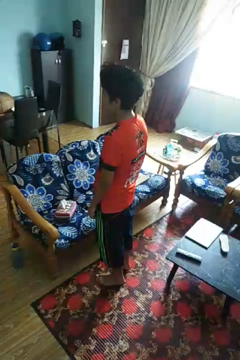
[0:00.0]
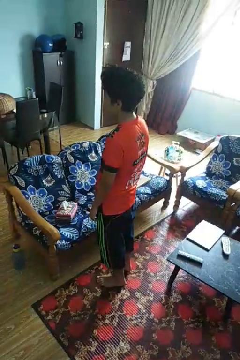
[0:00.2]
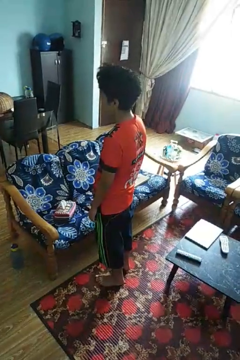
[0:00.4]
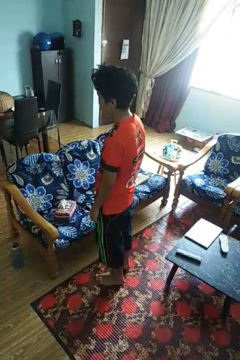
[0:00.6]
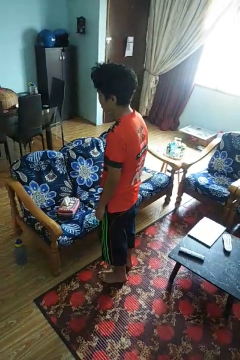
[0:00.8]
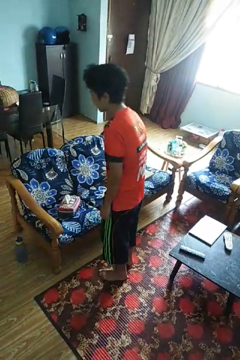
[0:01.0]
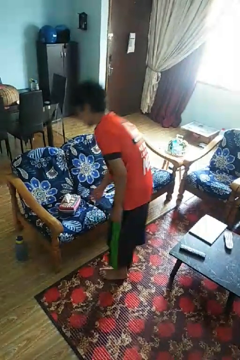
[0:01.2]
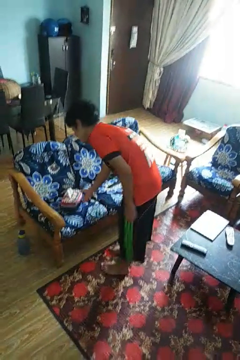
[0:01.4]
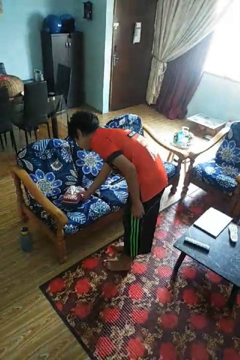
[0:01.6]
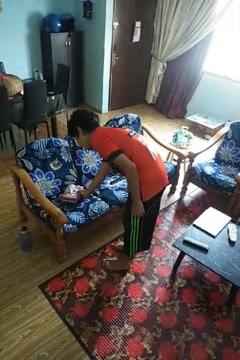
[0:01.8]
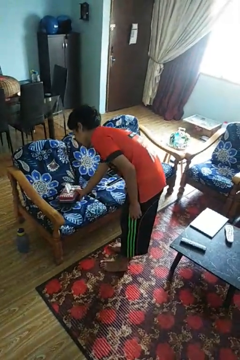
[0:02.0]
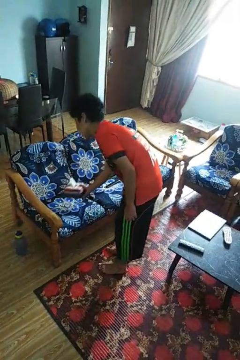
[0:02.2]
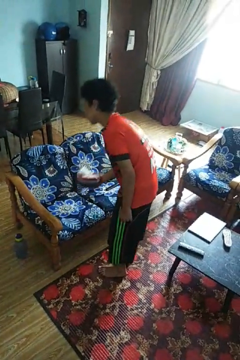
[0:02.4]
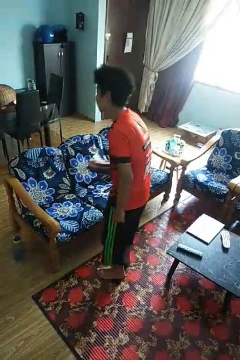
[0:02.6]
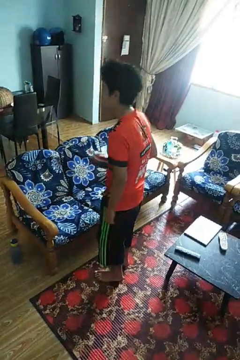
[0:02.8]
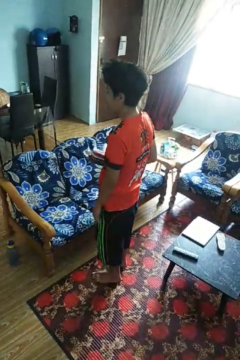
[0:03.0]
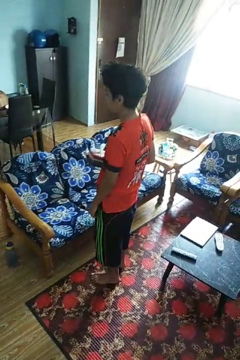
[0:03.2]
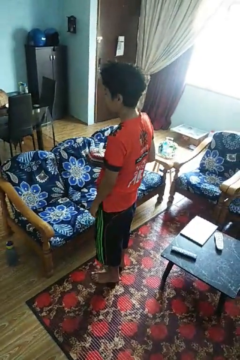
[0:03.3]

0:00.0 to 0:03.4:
person picks up object from couch

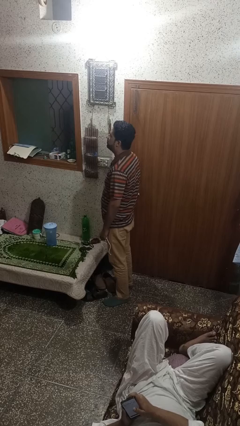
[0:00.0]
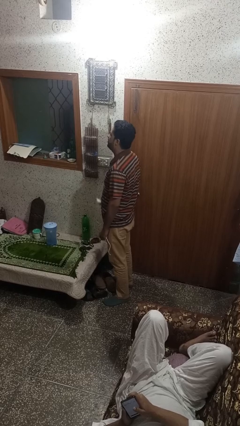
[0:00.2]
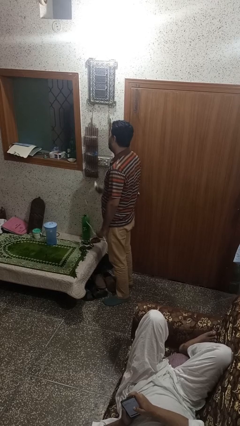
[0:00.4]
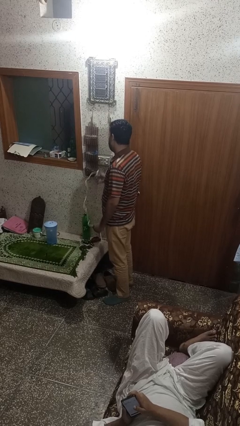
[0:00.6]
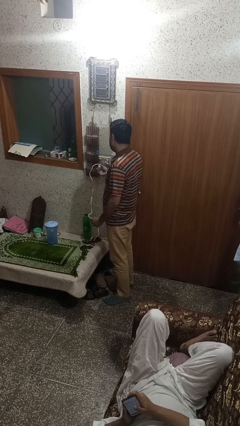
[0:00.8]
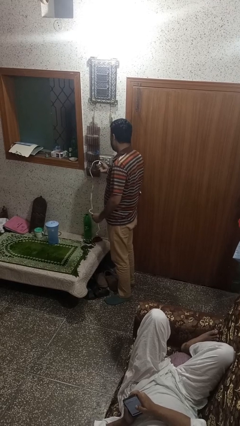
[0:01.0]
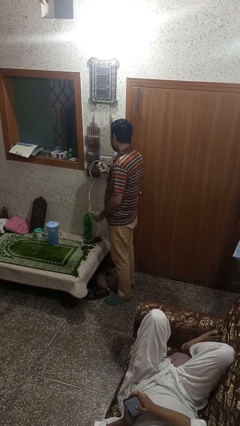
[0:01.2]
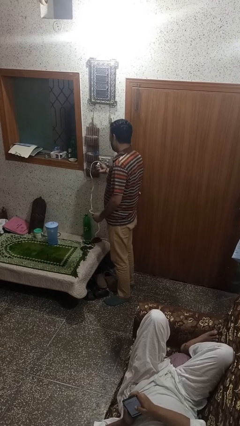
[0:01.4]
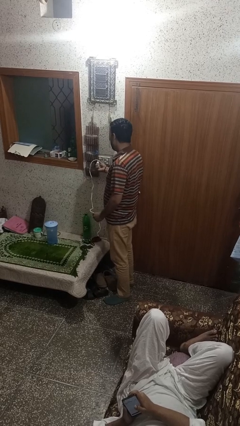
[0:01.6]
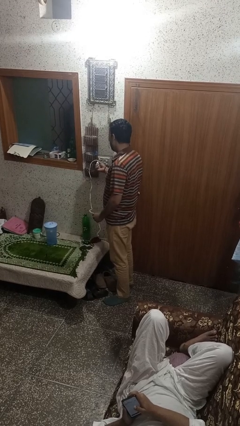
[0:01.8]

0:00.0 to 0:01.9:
person plugs into electrical socket

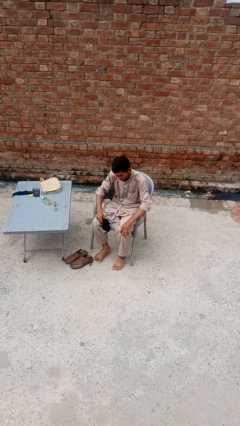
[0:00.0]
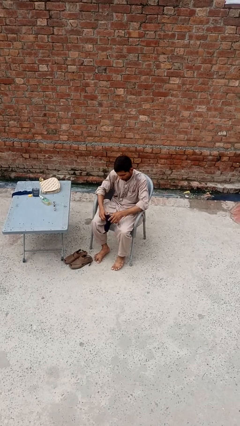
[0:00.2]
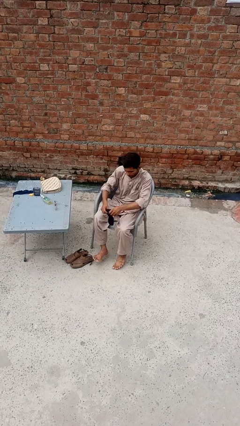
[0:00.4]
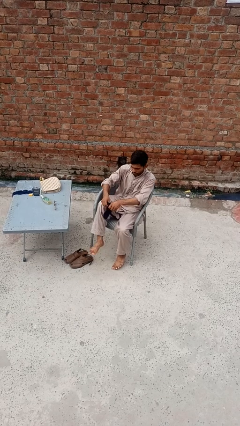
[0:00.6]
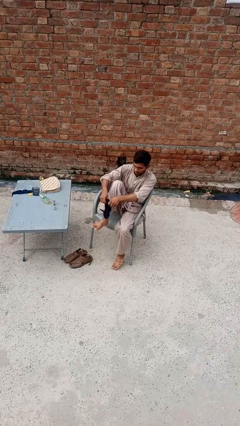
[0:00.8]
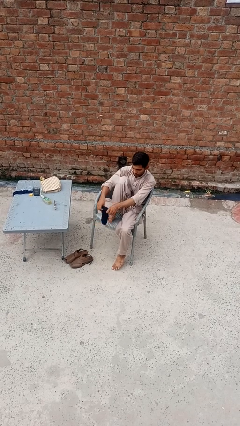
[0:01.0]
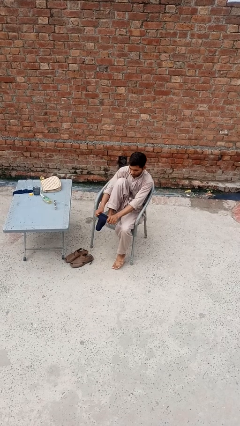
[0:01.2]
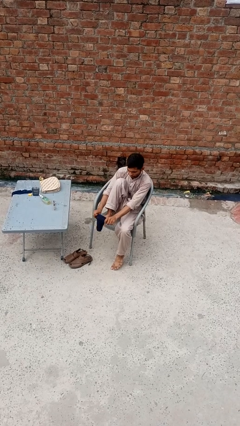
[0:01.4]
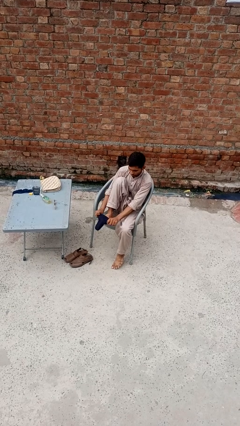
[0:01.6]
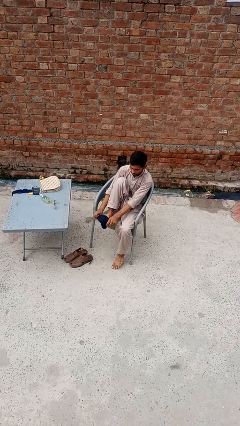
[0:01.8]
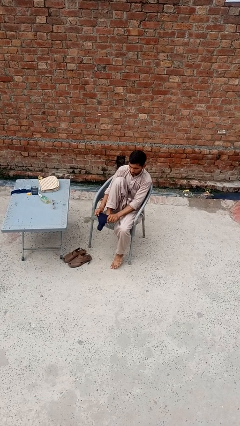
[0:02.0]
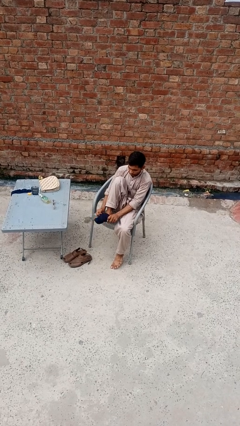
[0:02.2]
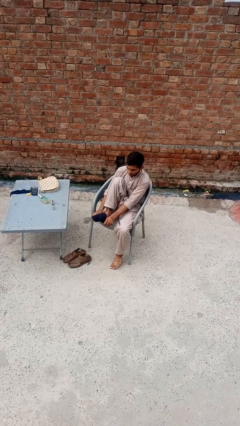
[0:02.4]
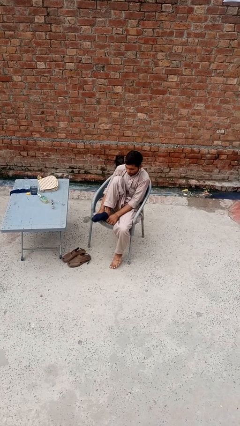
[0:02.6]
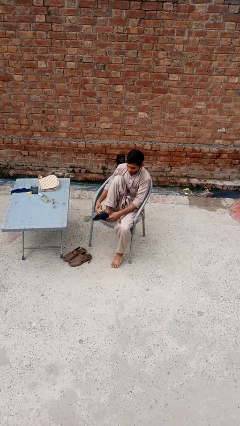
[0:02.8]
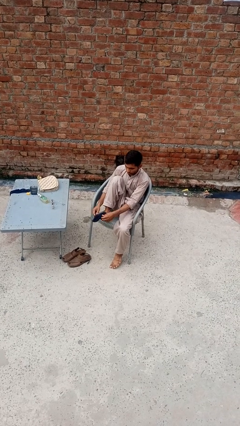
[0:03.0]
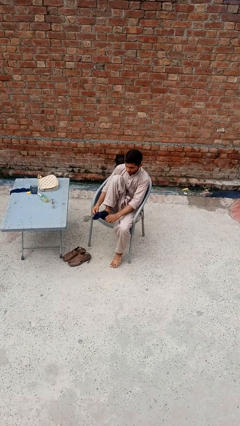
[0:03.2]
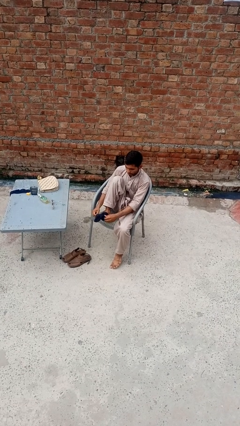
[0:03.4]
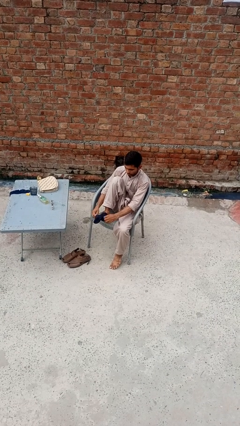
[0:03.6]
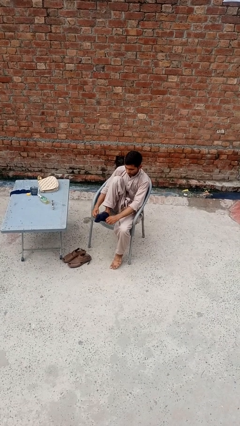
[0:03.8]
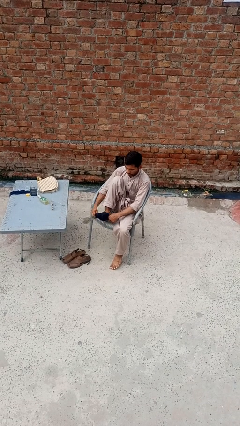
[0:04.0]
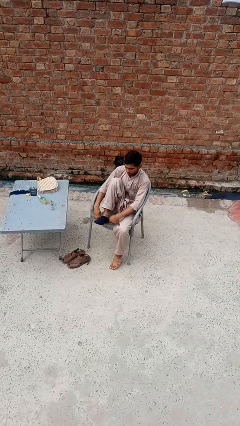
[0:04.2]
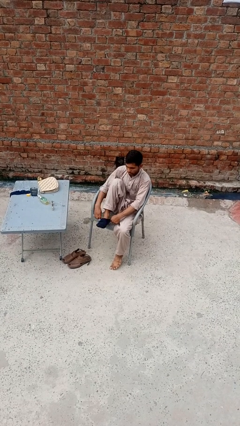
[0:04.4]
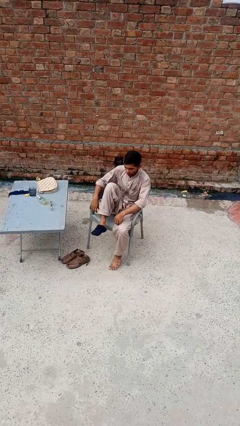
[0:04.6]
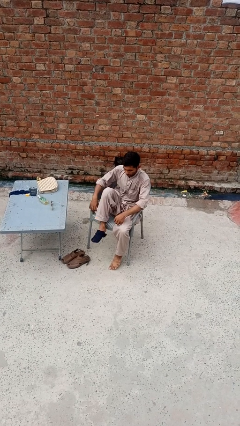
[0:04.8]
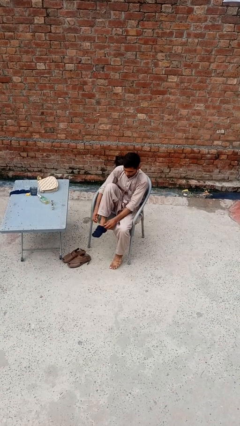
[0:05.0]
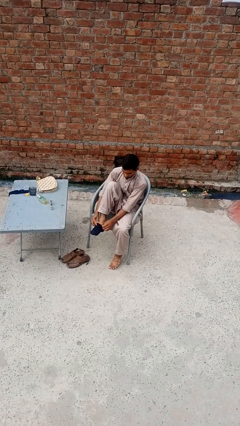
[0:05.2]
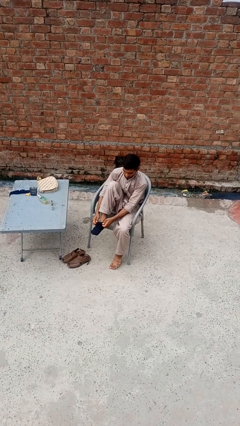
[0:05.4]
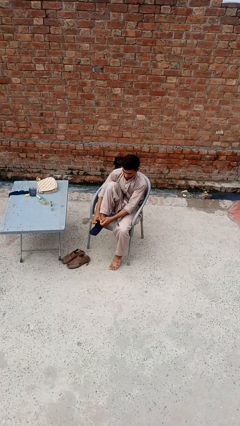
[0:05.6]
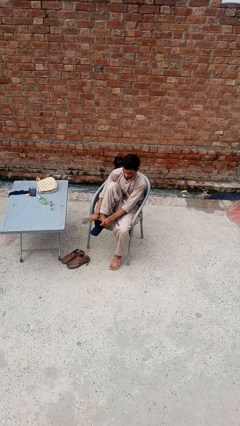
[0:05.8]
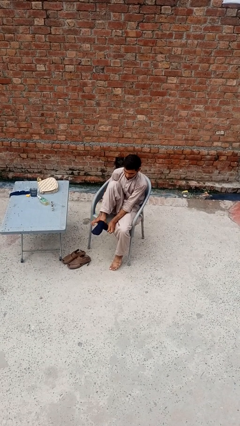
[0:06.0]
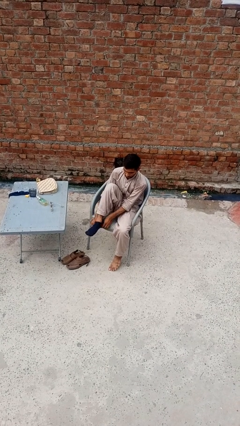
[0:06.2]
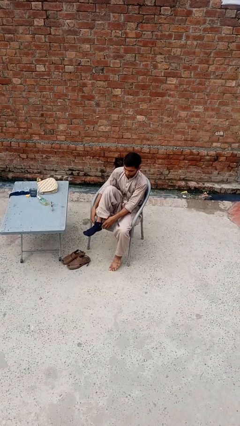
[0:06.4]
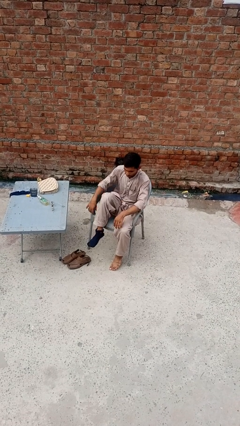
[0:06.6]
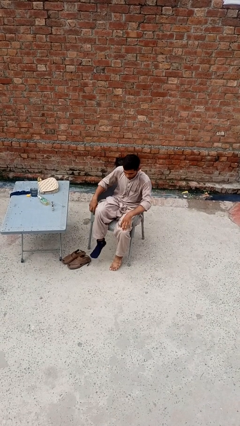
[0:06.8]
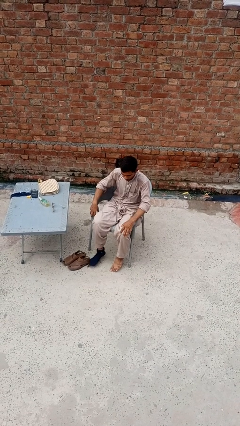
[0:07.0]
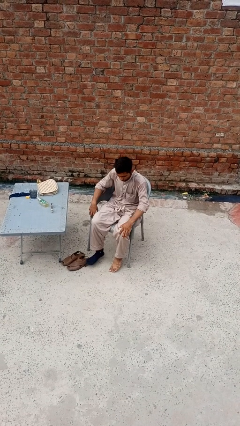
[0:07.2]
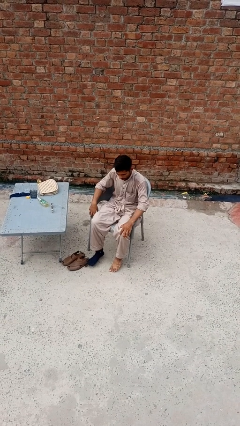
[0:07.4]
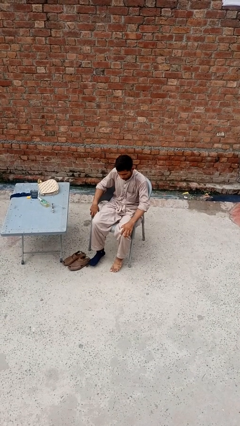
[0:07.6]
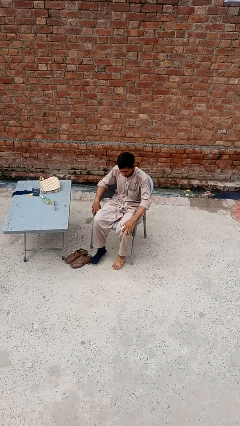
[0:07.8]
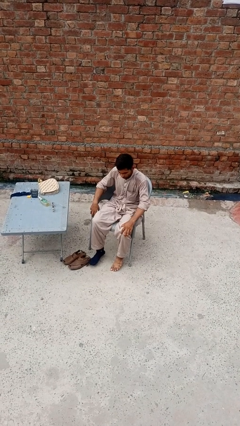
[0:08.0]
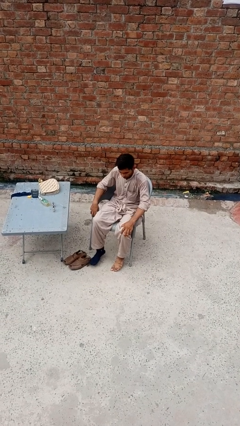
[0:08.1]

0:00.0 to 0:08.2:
person puts on socks

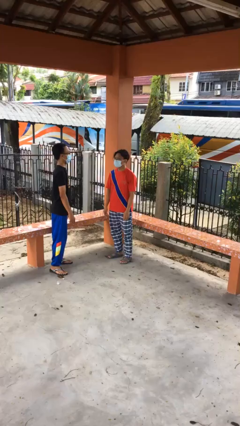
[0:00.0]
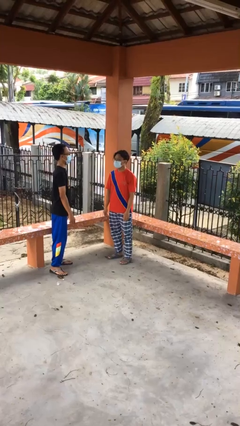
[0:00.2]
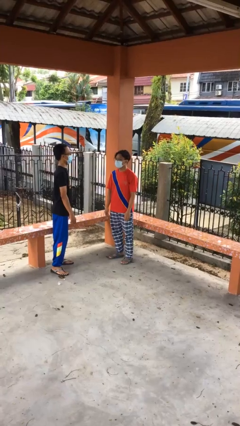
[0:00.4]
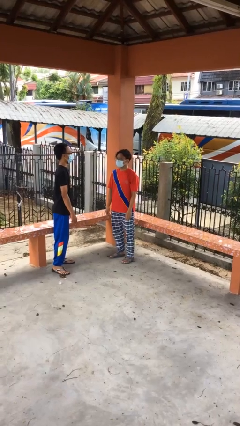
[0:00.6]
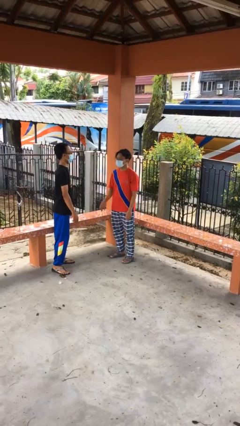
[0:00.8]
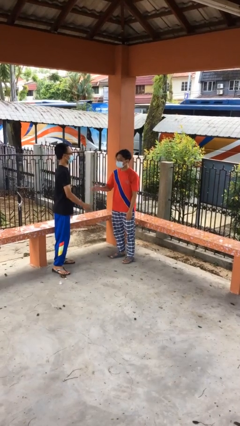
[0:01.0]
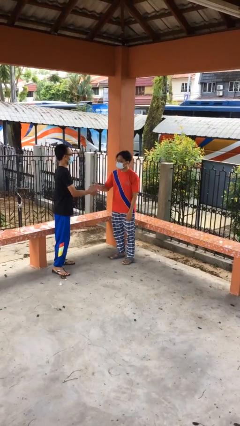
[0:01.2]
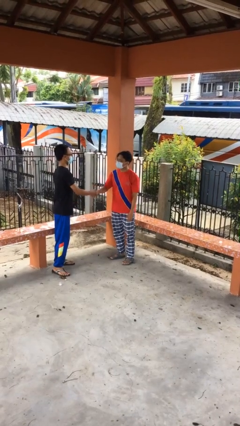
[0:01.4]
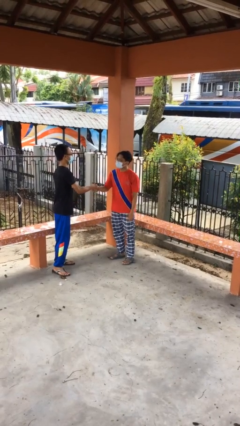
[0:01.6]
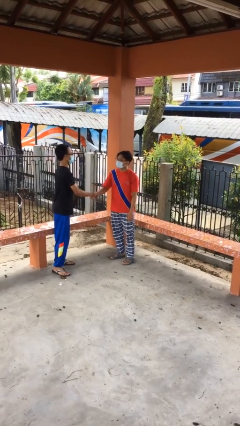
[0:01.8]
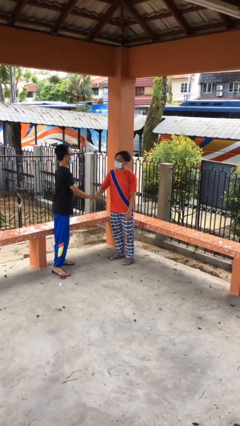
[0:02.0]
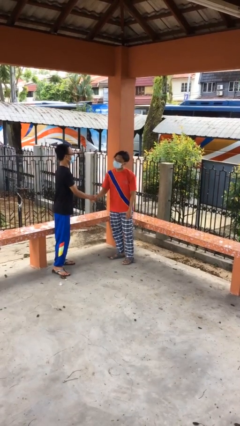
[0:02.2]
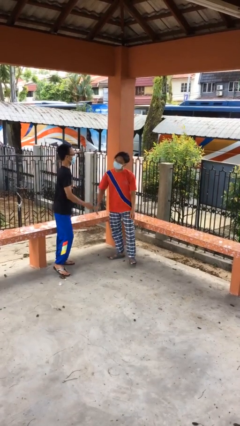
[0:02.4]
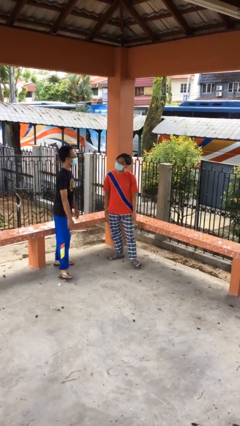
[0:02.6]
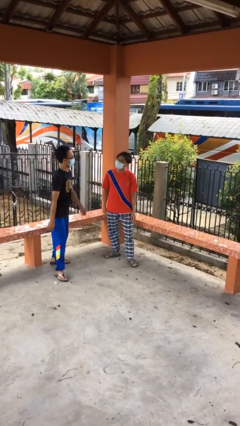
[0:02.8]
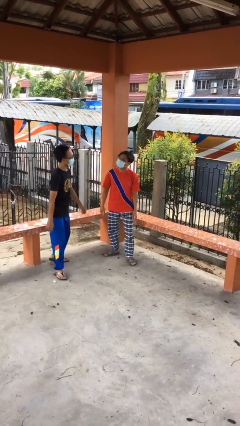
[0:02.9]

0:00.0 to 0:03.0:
person shakes hand

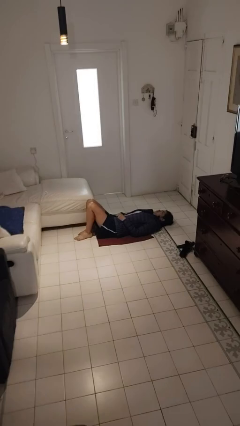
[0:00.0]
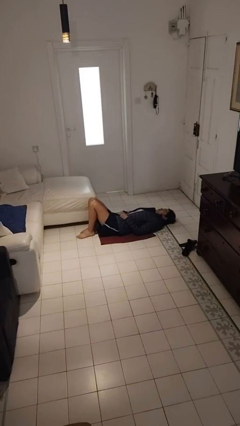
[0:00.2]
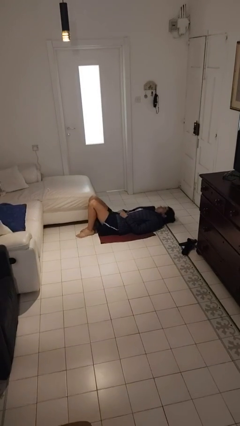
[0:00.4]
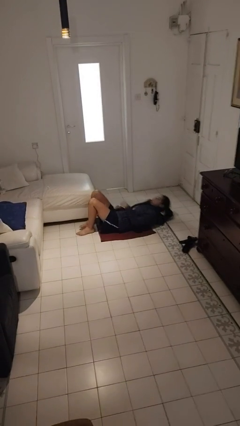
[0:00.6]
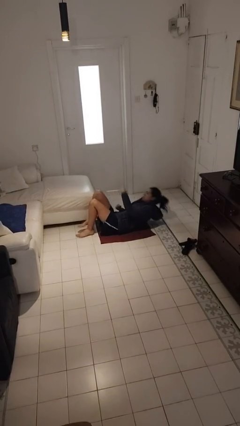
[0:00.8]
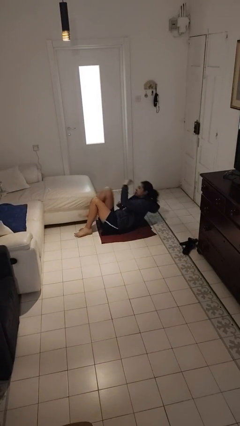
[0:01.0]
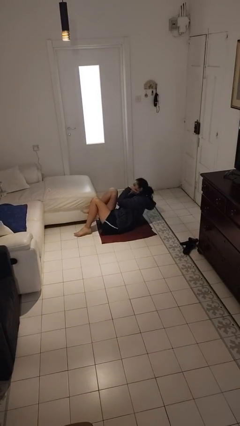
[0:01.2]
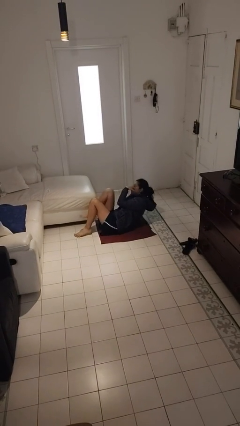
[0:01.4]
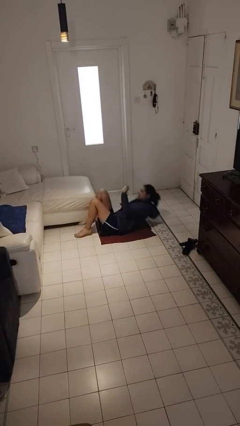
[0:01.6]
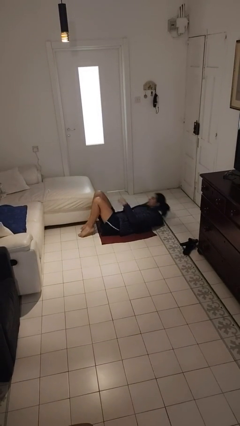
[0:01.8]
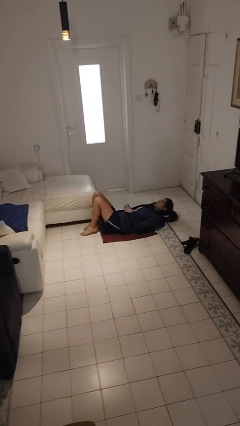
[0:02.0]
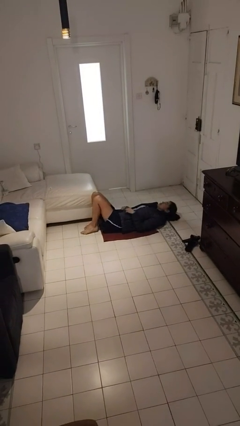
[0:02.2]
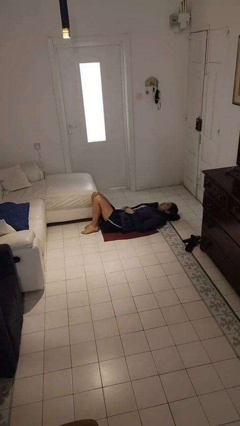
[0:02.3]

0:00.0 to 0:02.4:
person exercises with situp
